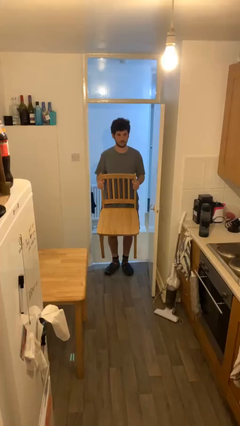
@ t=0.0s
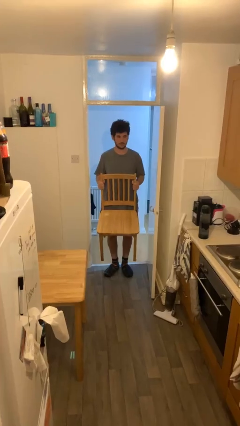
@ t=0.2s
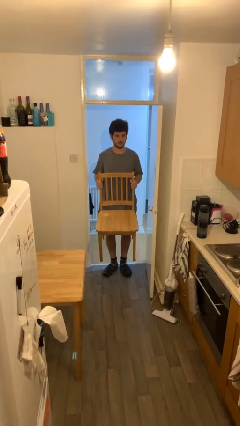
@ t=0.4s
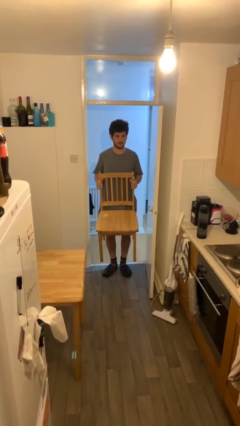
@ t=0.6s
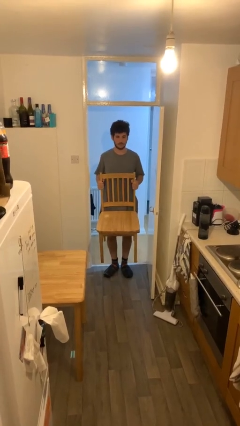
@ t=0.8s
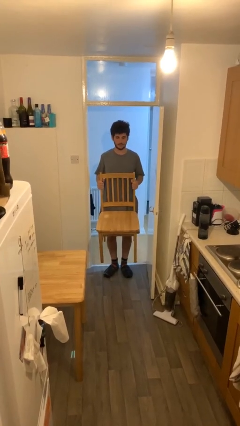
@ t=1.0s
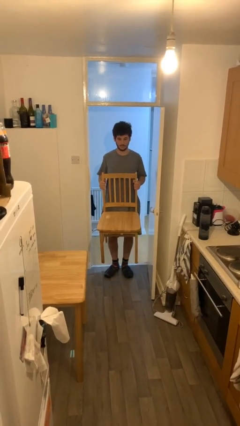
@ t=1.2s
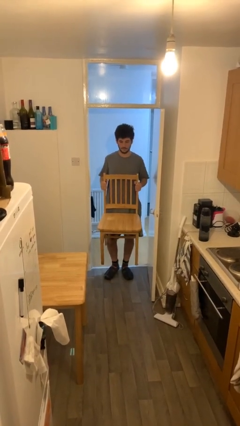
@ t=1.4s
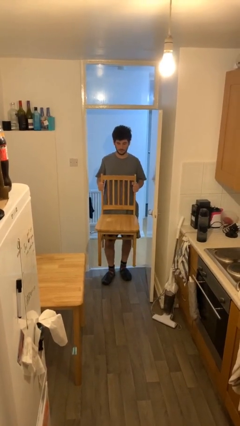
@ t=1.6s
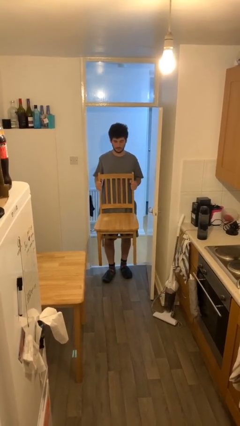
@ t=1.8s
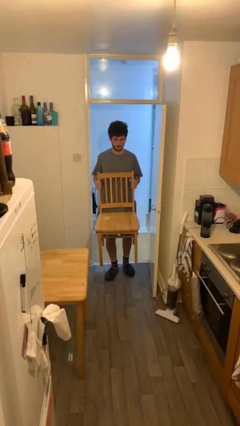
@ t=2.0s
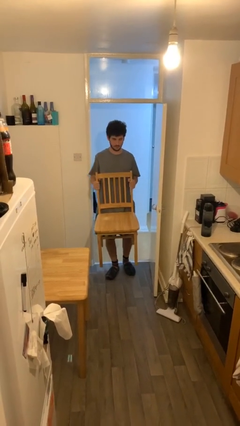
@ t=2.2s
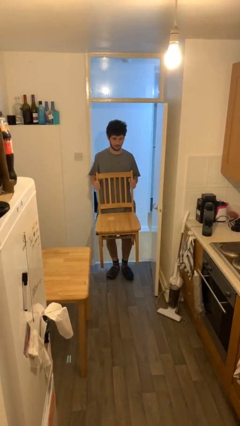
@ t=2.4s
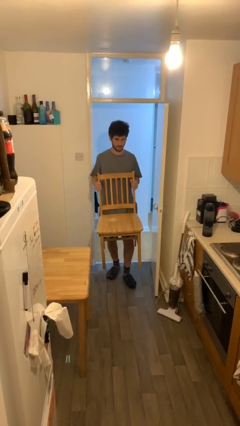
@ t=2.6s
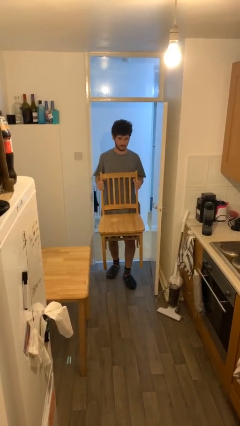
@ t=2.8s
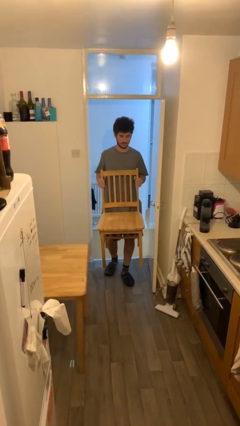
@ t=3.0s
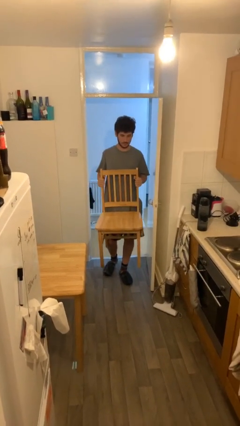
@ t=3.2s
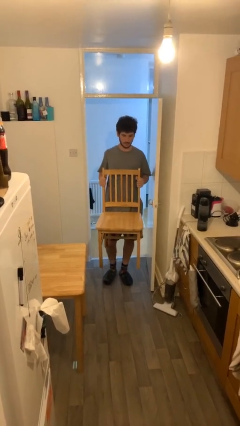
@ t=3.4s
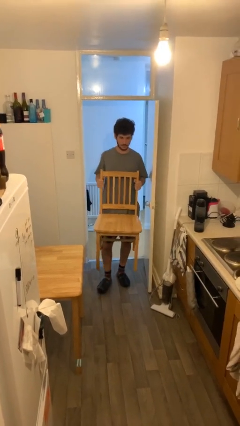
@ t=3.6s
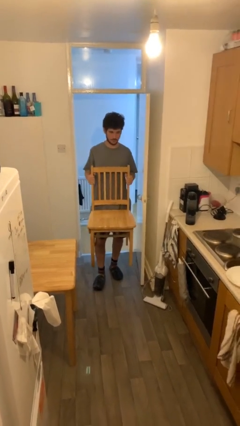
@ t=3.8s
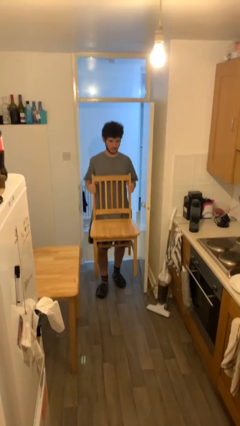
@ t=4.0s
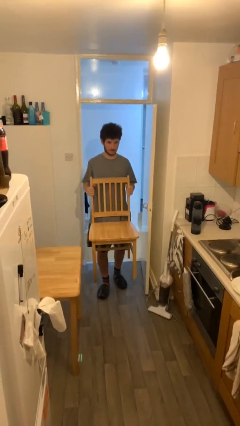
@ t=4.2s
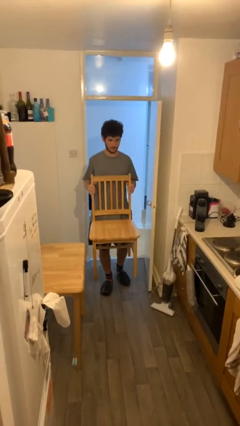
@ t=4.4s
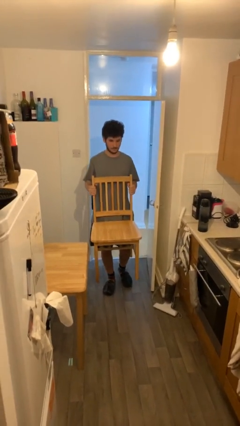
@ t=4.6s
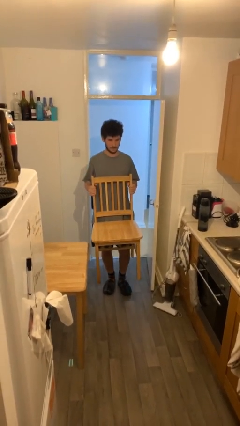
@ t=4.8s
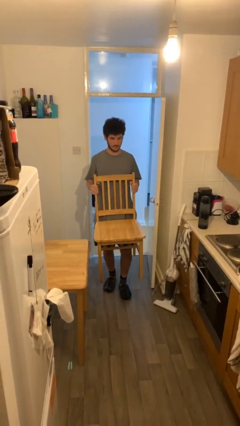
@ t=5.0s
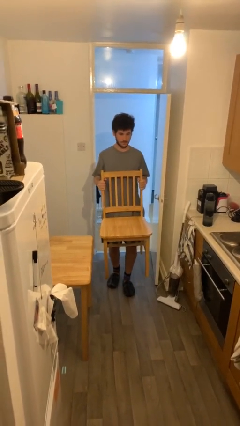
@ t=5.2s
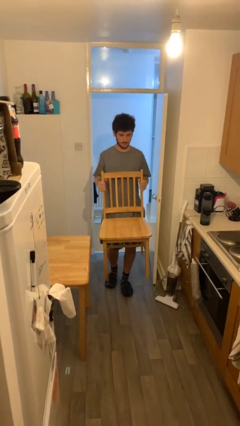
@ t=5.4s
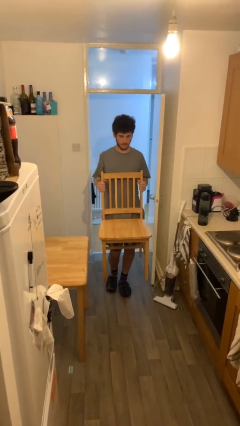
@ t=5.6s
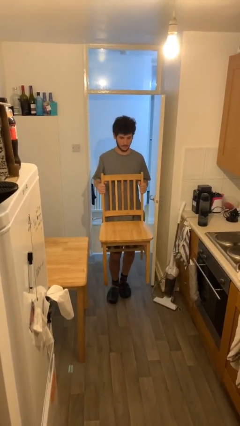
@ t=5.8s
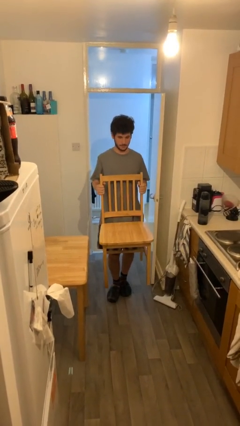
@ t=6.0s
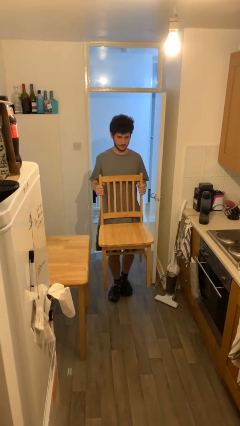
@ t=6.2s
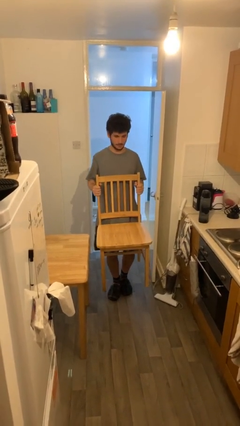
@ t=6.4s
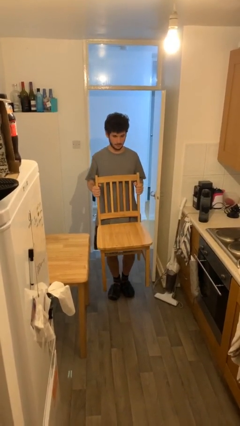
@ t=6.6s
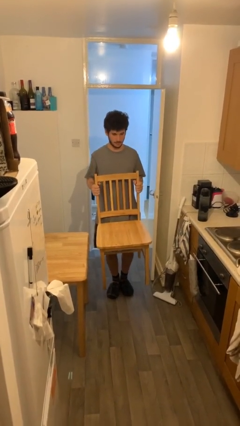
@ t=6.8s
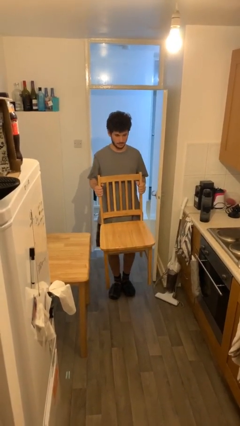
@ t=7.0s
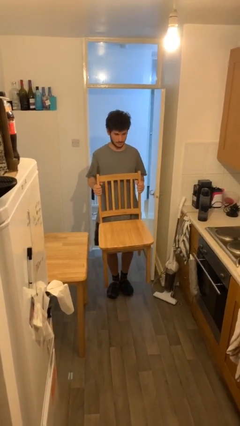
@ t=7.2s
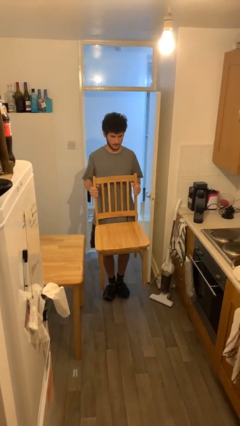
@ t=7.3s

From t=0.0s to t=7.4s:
person carries heavy object

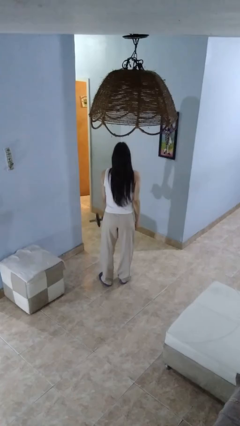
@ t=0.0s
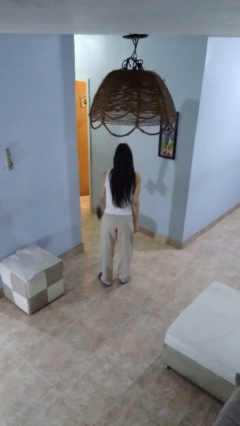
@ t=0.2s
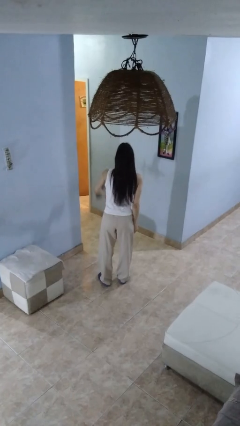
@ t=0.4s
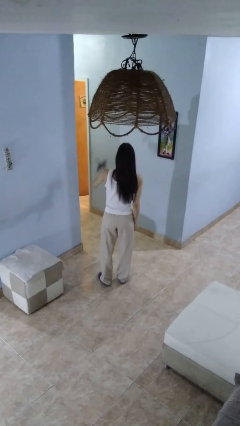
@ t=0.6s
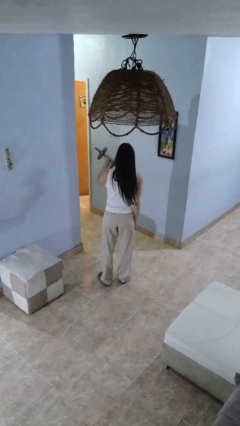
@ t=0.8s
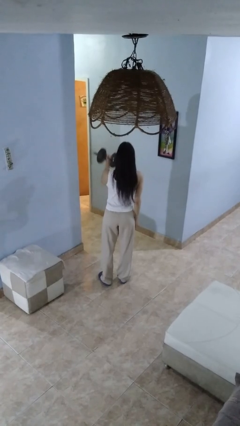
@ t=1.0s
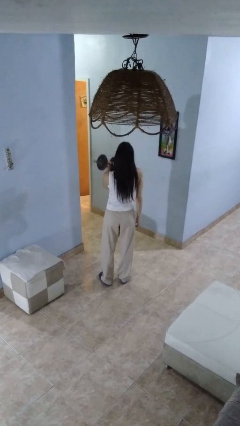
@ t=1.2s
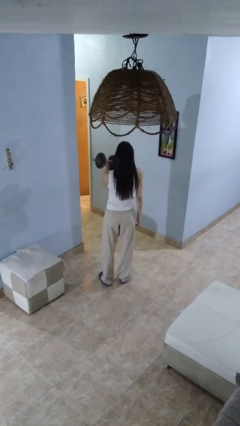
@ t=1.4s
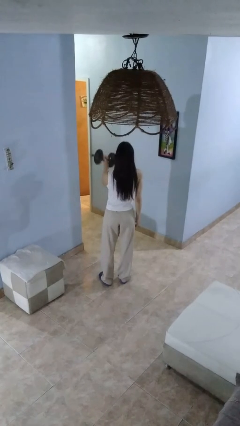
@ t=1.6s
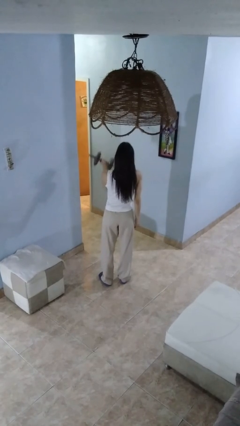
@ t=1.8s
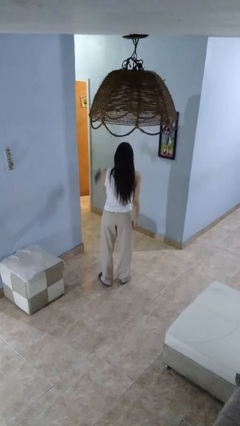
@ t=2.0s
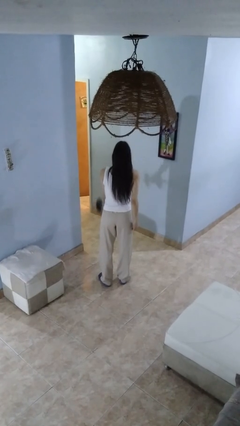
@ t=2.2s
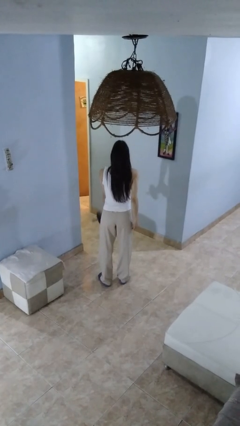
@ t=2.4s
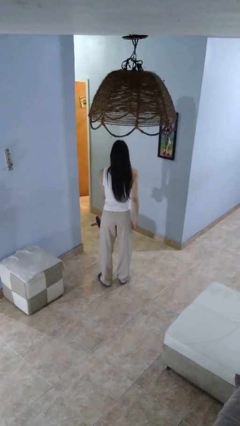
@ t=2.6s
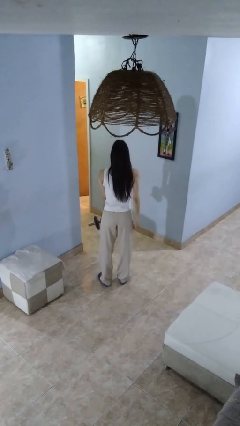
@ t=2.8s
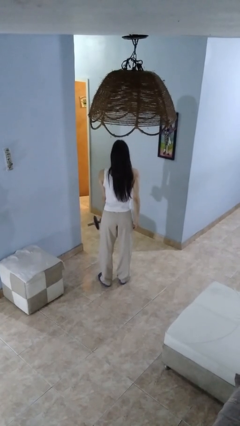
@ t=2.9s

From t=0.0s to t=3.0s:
person lifts dumbbells

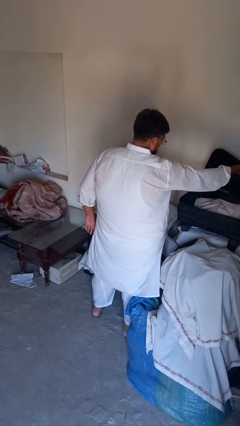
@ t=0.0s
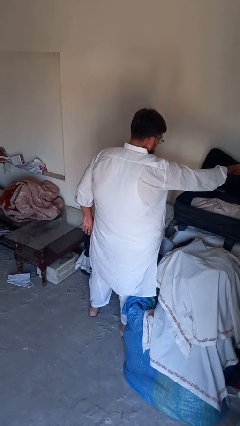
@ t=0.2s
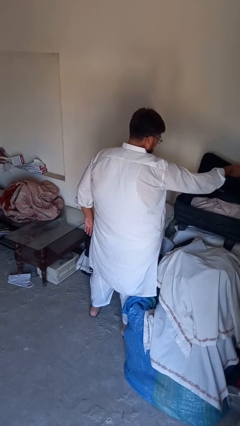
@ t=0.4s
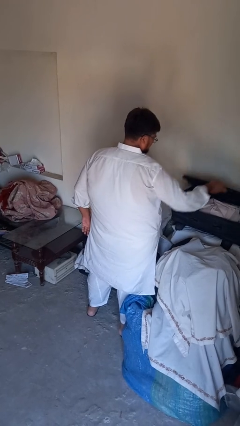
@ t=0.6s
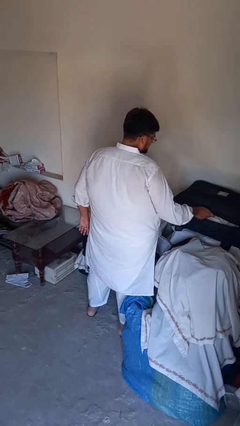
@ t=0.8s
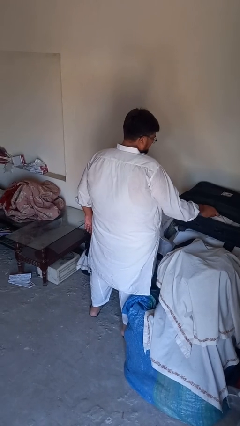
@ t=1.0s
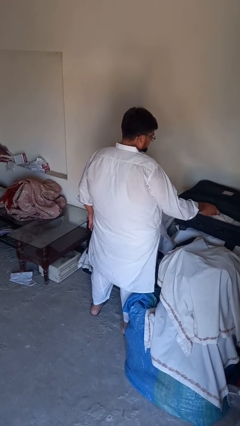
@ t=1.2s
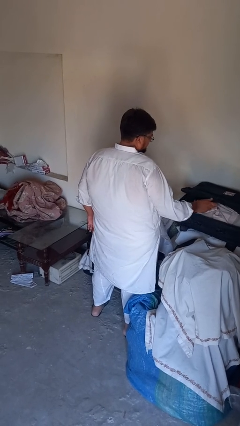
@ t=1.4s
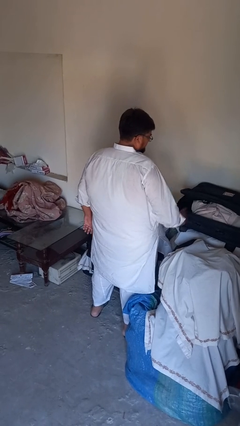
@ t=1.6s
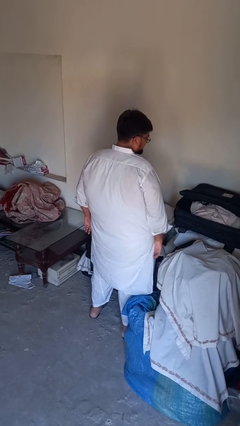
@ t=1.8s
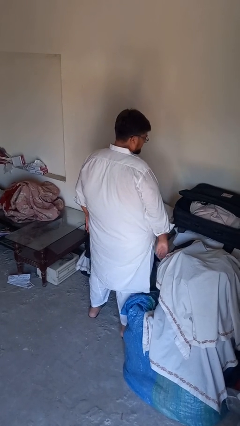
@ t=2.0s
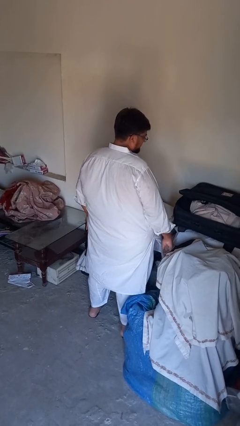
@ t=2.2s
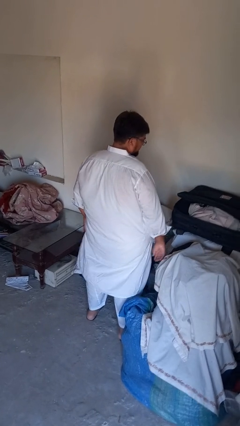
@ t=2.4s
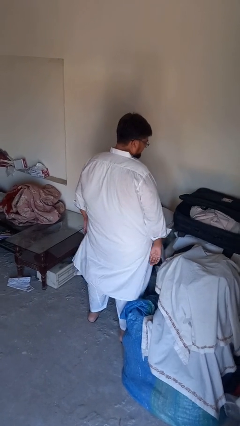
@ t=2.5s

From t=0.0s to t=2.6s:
person closes suitcase

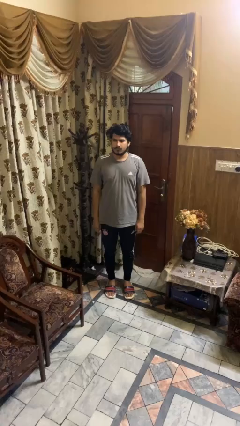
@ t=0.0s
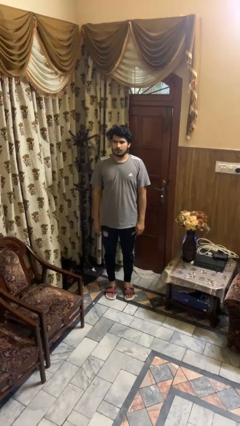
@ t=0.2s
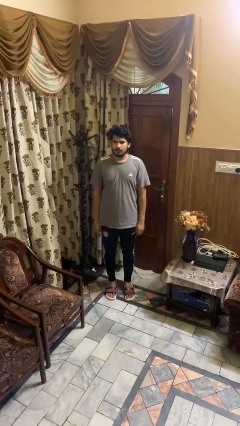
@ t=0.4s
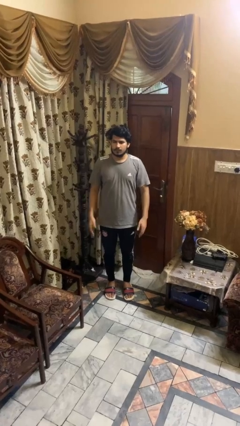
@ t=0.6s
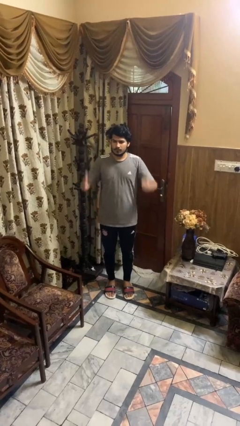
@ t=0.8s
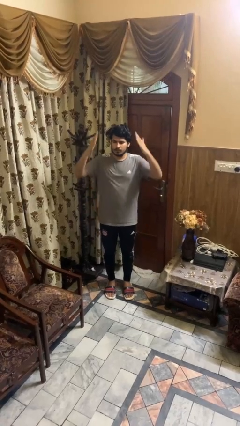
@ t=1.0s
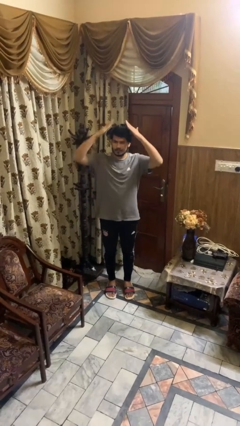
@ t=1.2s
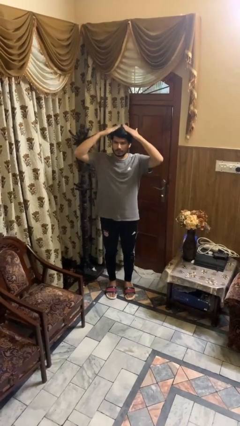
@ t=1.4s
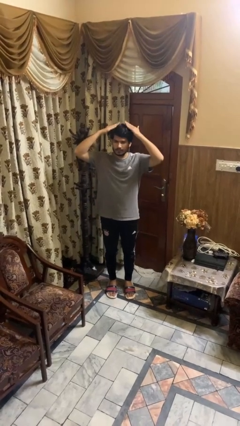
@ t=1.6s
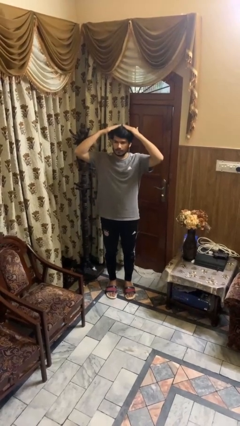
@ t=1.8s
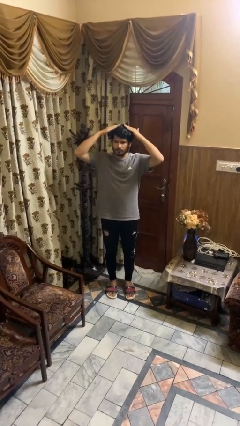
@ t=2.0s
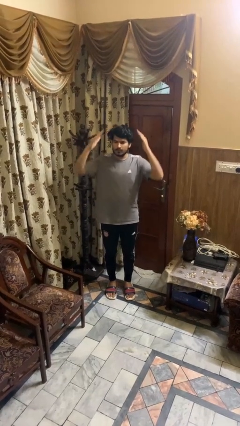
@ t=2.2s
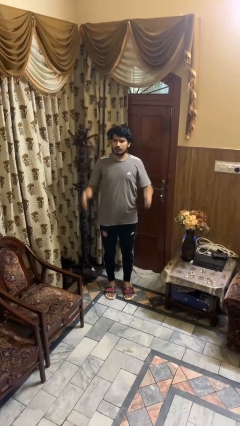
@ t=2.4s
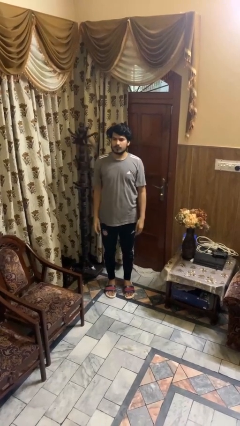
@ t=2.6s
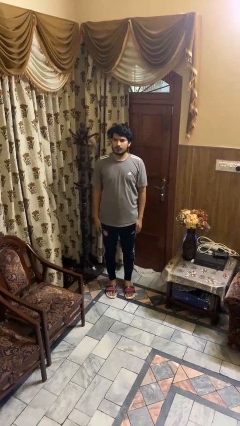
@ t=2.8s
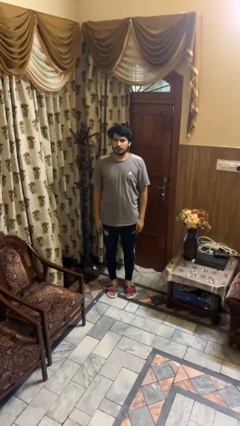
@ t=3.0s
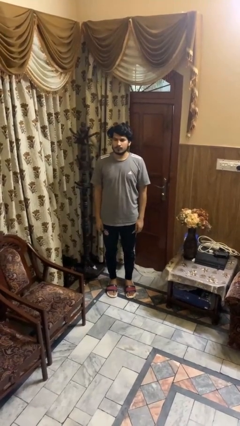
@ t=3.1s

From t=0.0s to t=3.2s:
person pats head

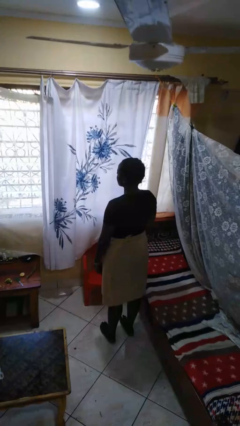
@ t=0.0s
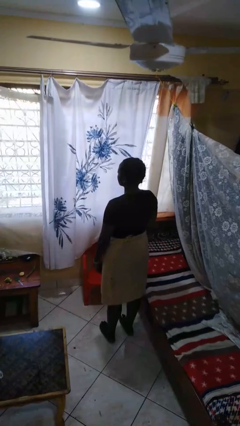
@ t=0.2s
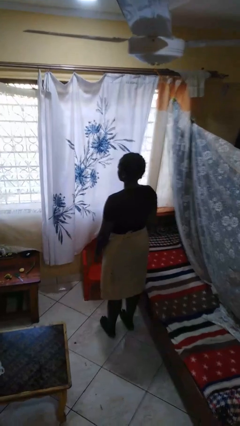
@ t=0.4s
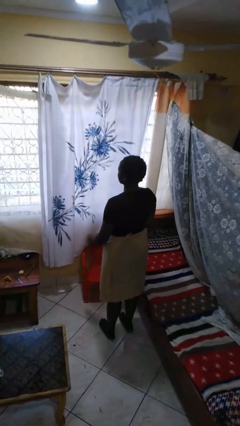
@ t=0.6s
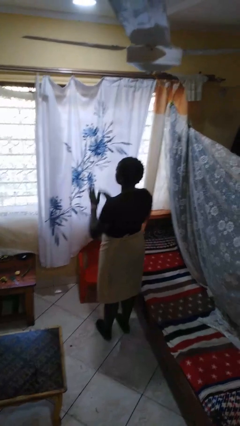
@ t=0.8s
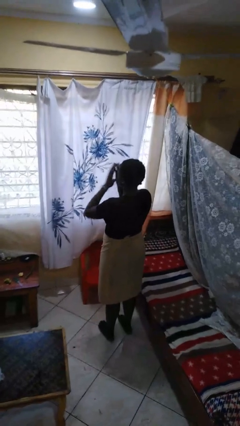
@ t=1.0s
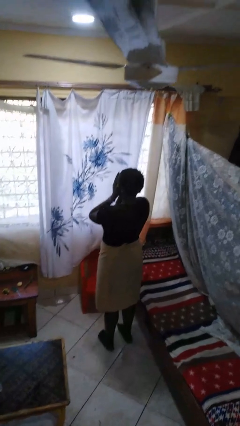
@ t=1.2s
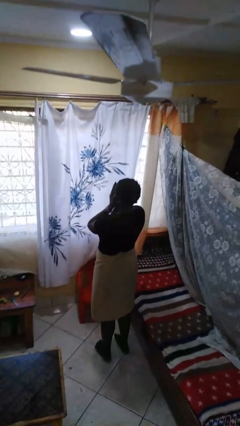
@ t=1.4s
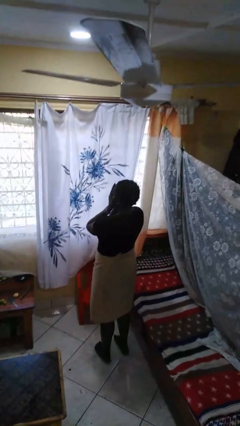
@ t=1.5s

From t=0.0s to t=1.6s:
person covers face with hands
